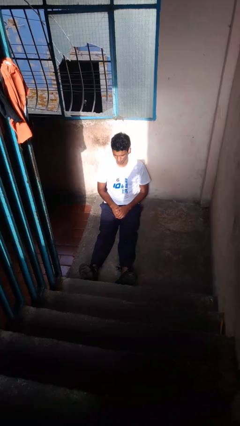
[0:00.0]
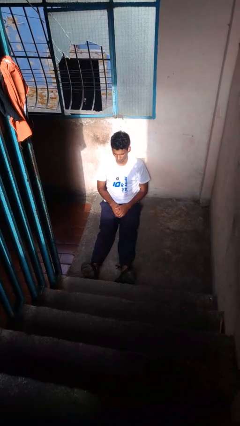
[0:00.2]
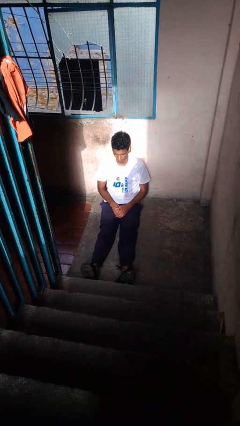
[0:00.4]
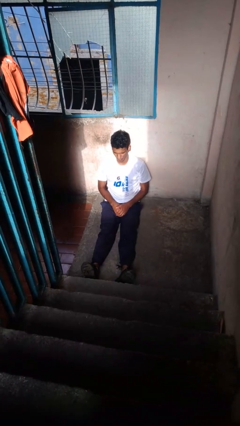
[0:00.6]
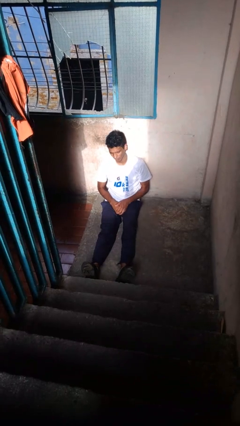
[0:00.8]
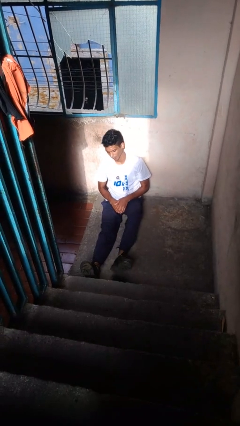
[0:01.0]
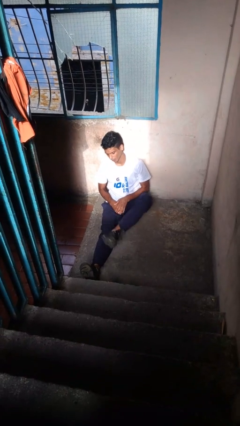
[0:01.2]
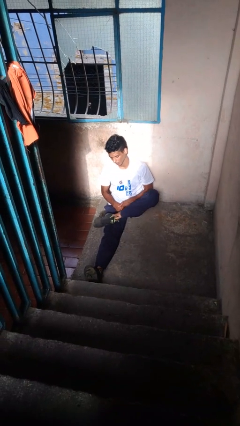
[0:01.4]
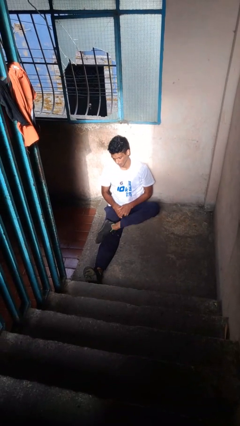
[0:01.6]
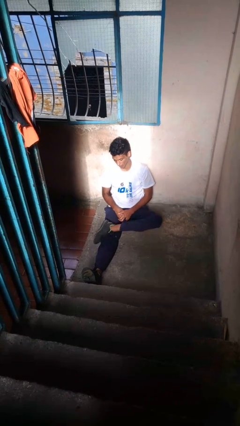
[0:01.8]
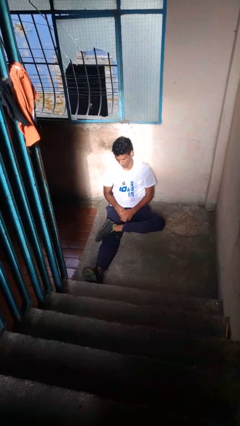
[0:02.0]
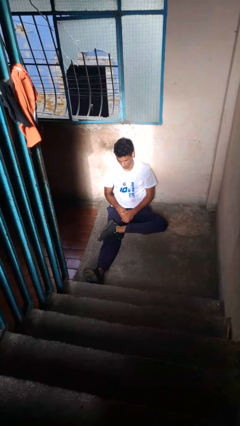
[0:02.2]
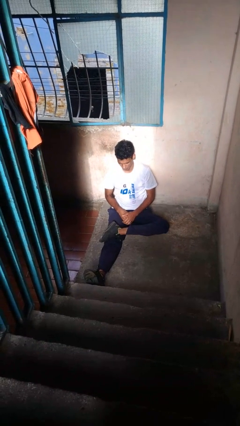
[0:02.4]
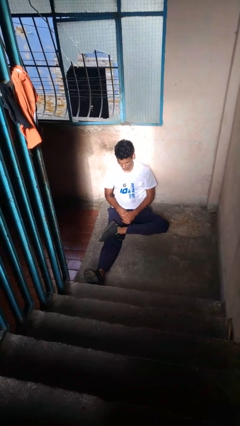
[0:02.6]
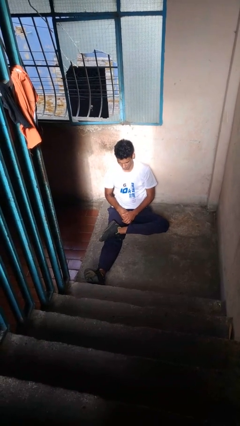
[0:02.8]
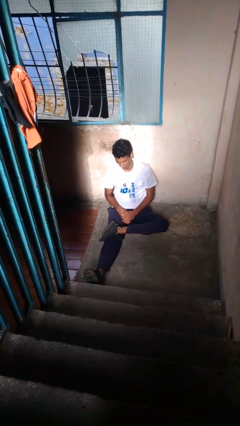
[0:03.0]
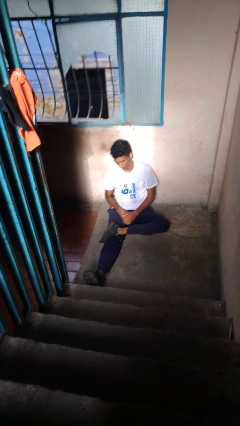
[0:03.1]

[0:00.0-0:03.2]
person crosses legs

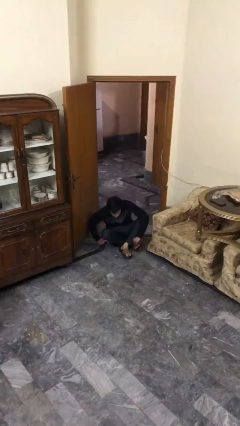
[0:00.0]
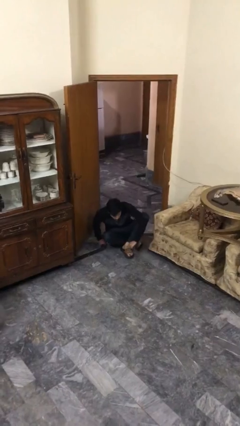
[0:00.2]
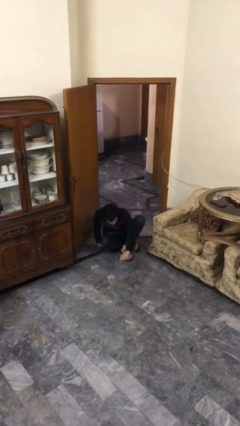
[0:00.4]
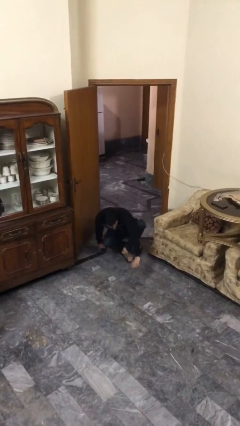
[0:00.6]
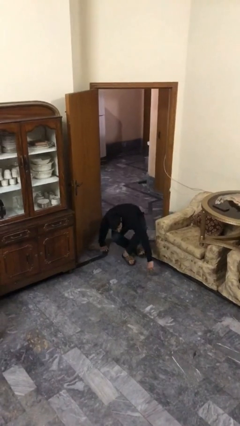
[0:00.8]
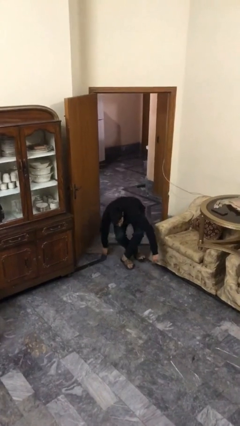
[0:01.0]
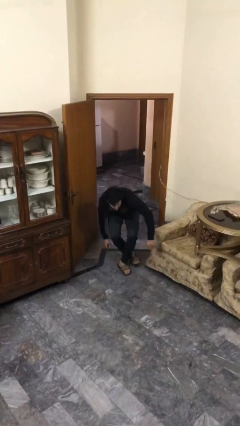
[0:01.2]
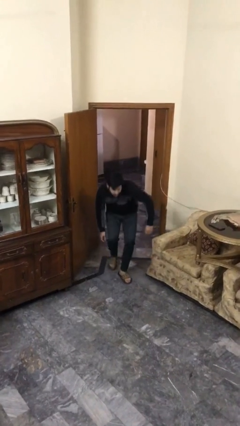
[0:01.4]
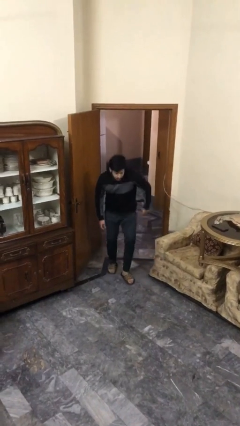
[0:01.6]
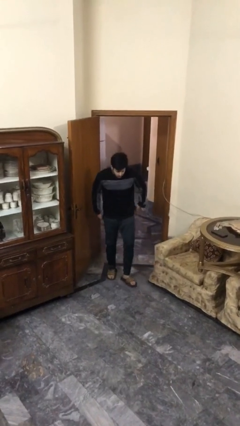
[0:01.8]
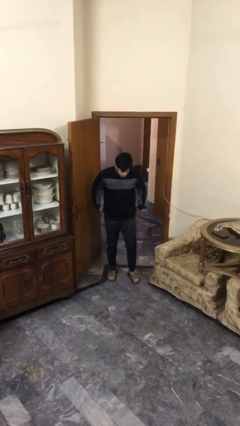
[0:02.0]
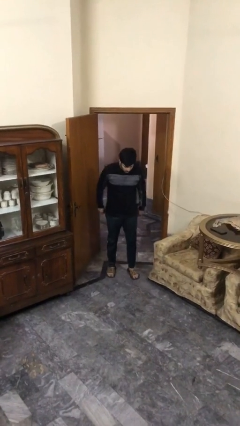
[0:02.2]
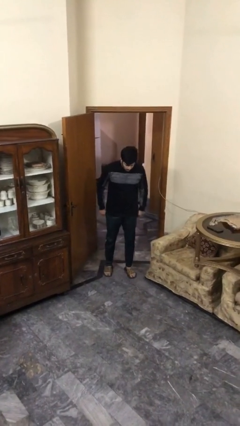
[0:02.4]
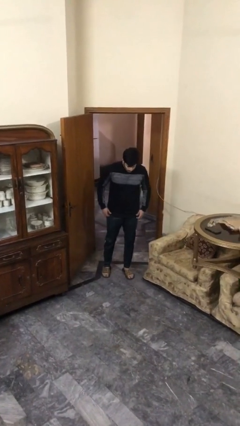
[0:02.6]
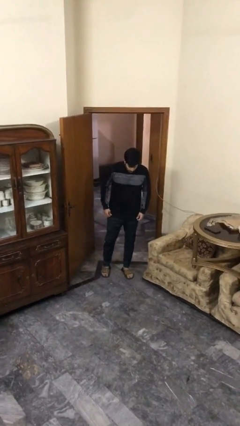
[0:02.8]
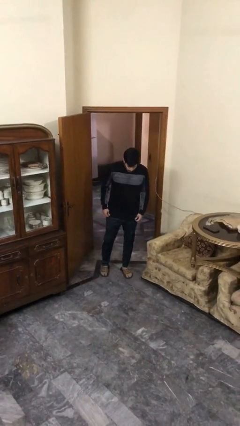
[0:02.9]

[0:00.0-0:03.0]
person stands up

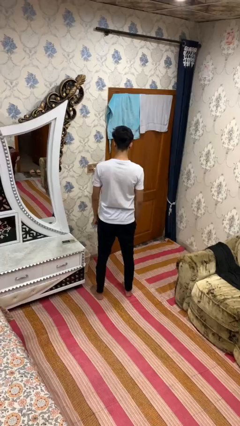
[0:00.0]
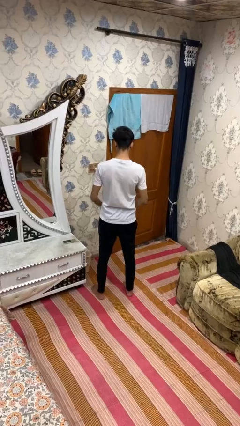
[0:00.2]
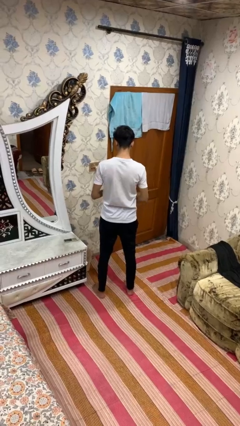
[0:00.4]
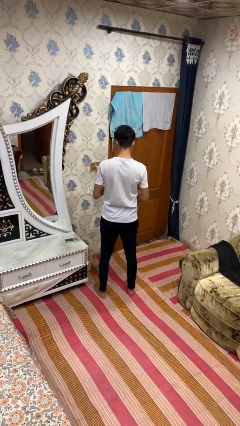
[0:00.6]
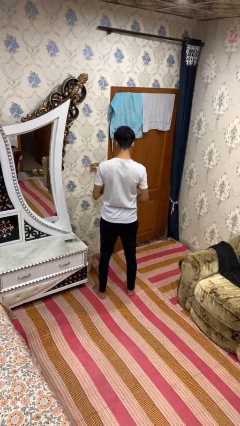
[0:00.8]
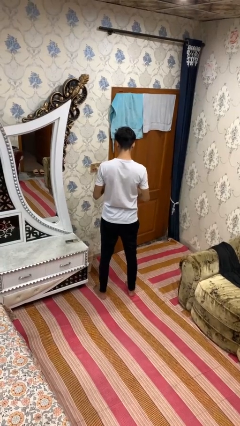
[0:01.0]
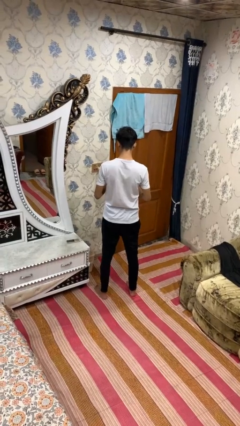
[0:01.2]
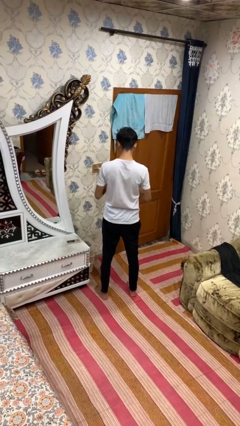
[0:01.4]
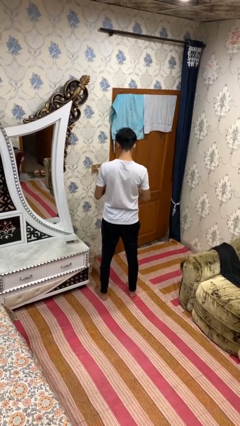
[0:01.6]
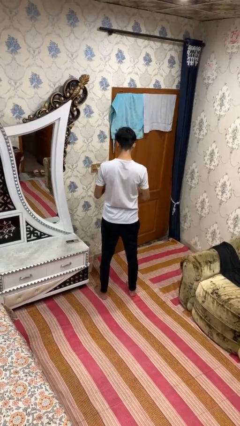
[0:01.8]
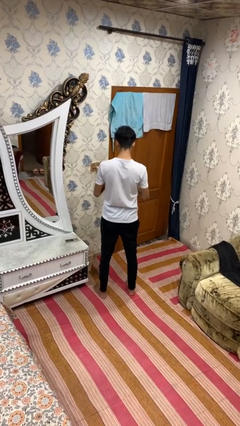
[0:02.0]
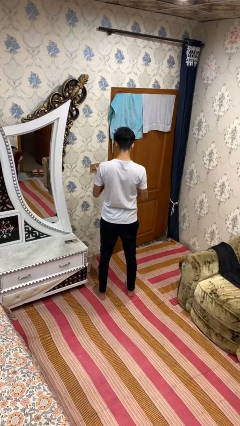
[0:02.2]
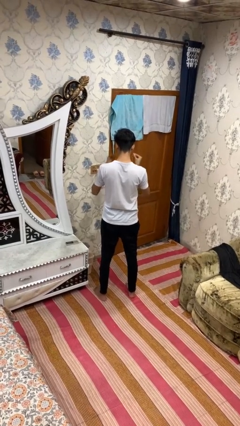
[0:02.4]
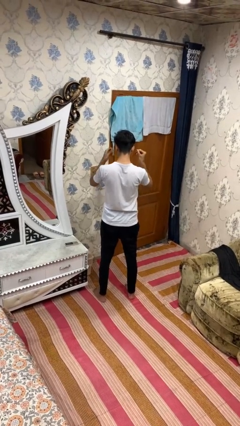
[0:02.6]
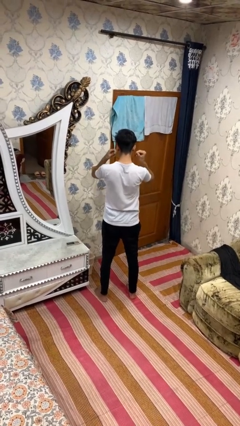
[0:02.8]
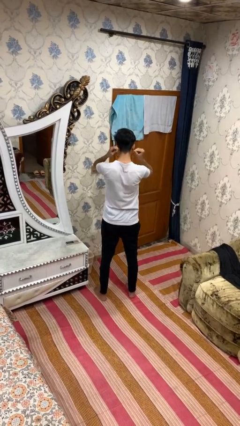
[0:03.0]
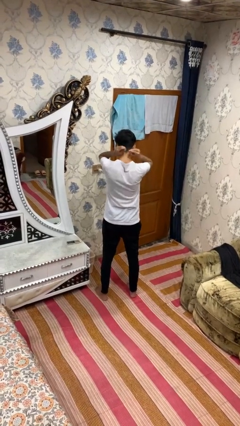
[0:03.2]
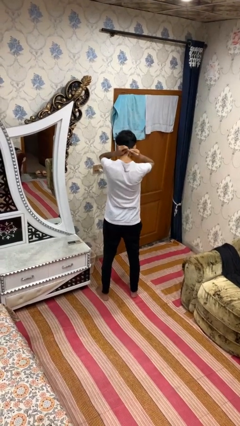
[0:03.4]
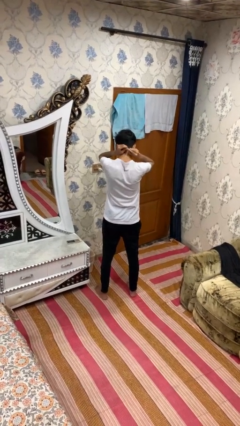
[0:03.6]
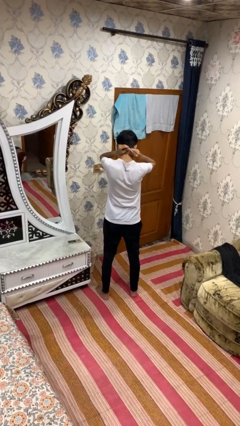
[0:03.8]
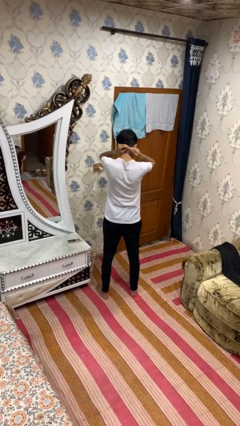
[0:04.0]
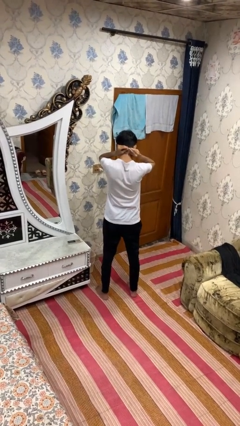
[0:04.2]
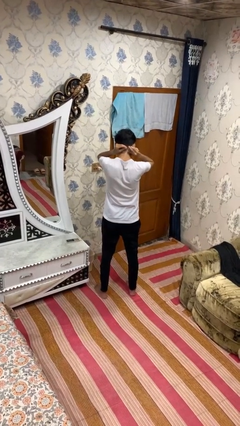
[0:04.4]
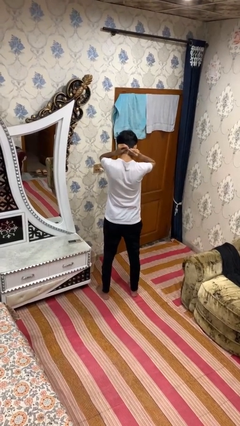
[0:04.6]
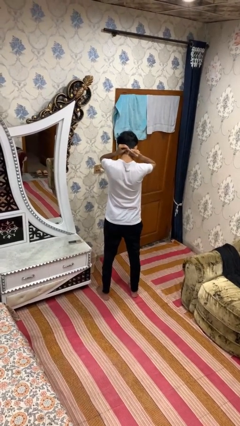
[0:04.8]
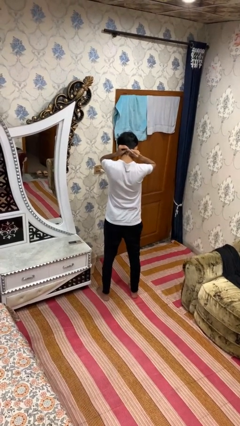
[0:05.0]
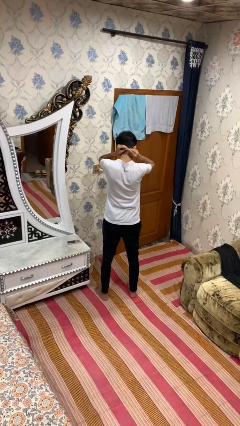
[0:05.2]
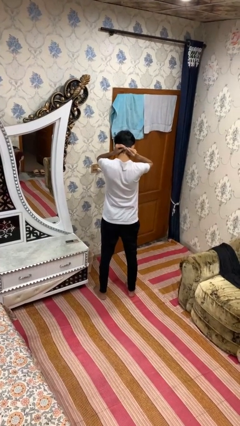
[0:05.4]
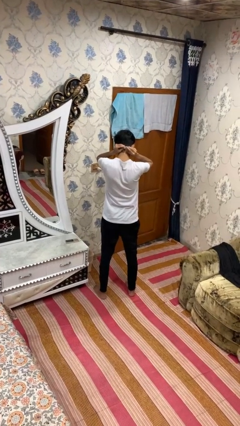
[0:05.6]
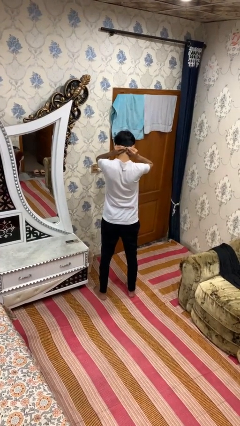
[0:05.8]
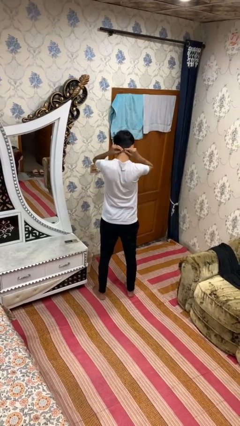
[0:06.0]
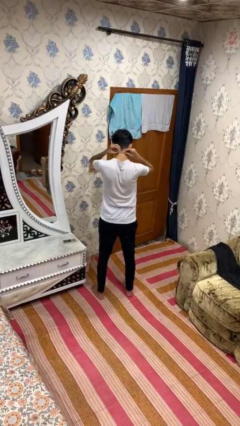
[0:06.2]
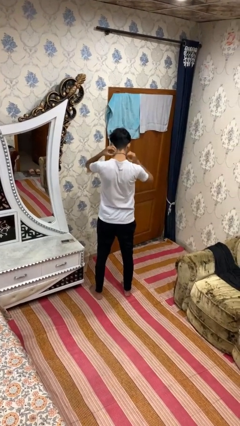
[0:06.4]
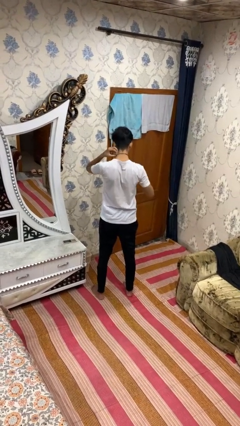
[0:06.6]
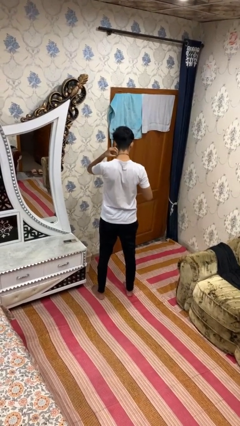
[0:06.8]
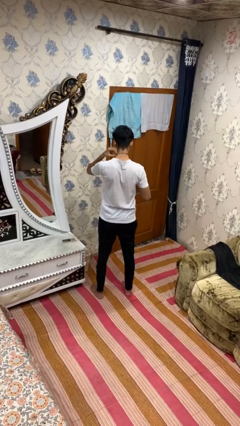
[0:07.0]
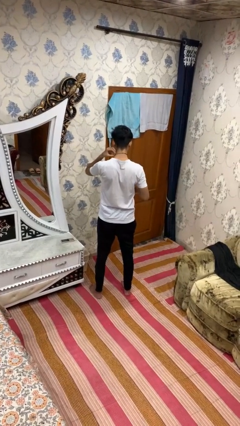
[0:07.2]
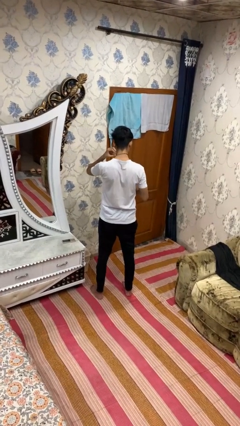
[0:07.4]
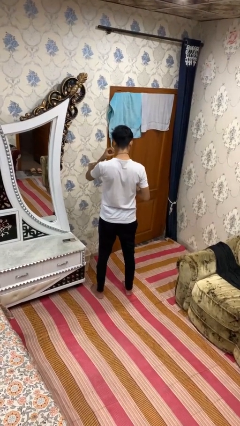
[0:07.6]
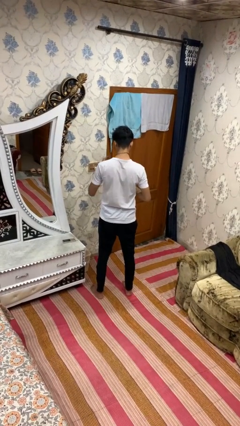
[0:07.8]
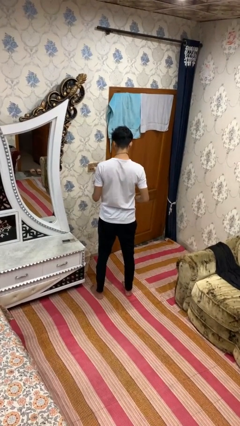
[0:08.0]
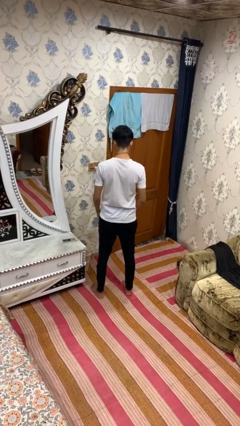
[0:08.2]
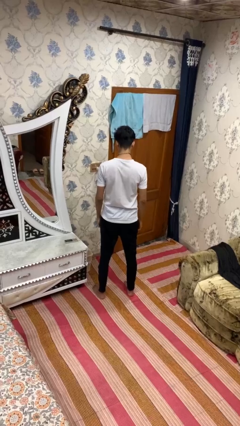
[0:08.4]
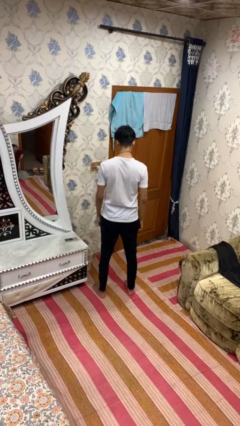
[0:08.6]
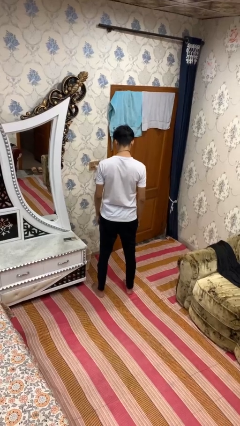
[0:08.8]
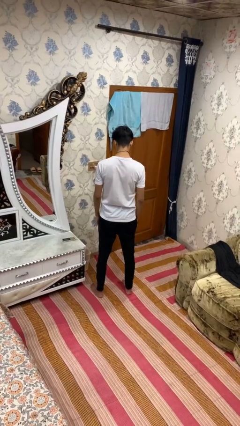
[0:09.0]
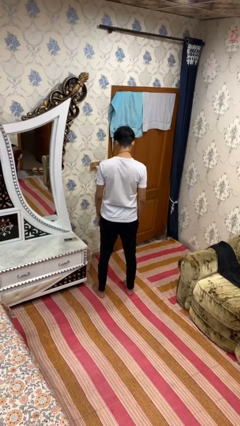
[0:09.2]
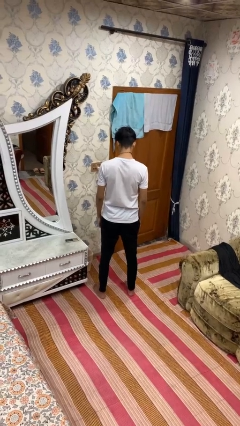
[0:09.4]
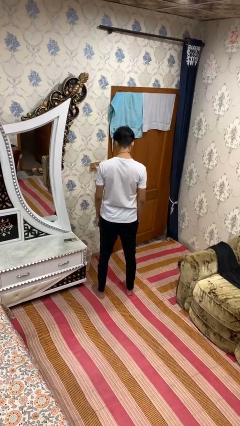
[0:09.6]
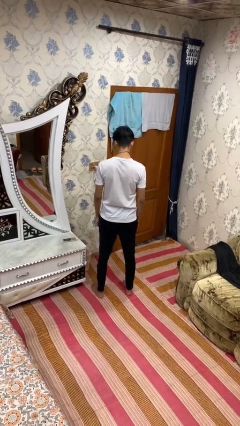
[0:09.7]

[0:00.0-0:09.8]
person puts on necklace

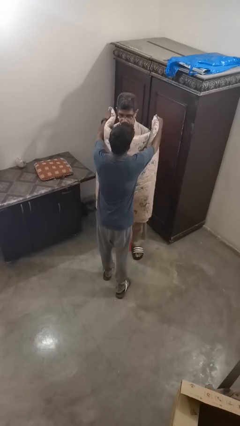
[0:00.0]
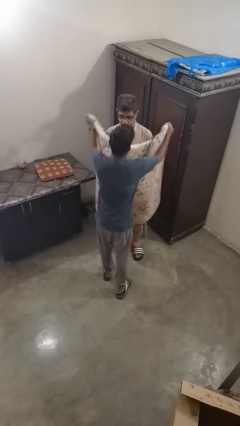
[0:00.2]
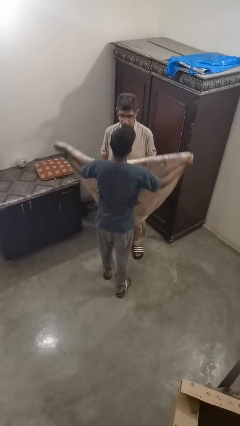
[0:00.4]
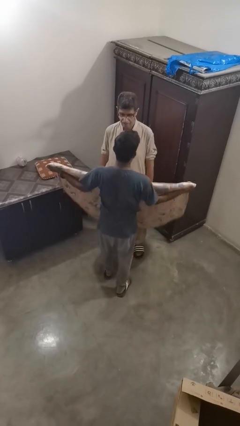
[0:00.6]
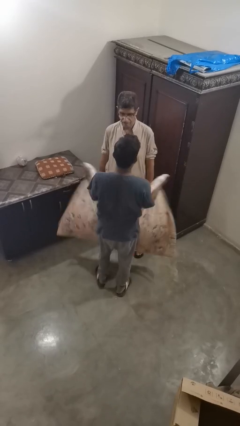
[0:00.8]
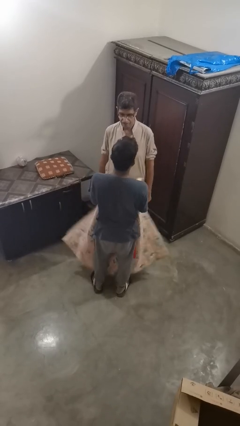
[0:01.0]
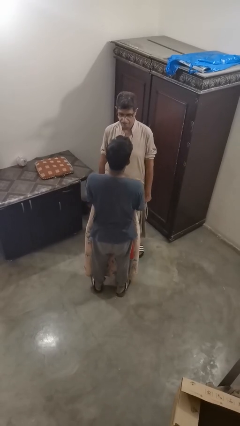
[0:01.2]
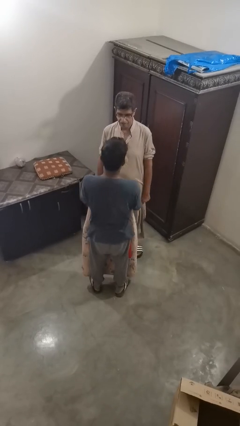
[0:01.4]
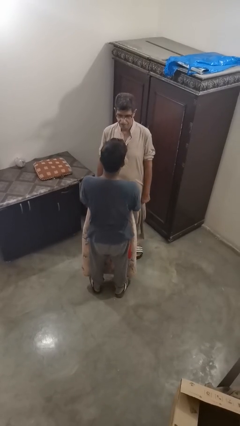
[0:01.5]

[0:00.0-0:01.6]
person uncovers friend with blanket
